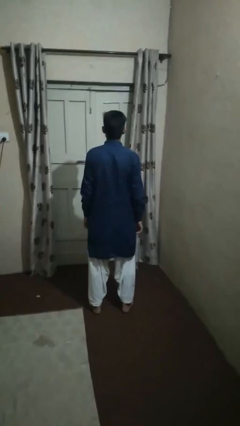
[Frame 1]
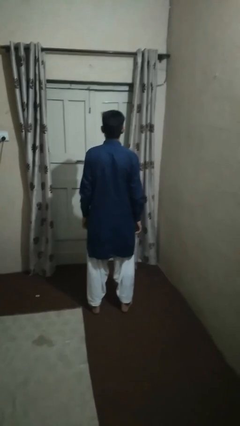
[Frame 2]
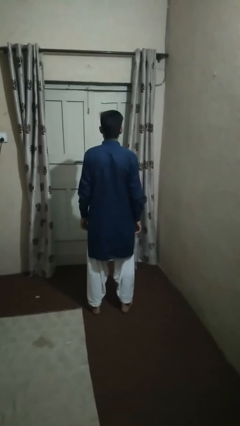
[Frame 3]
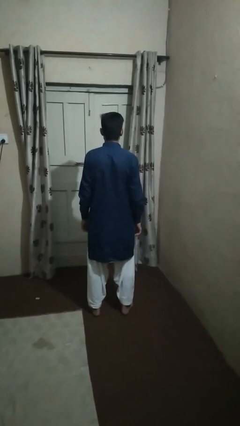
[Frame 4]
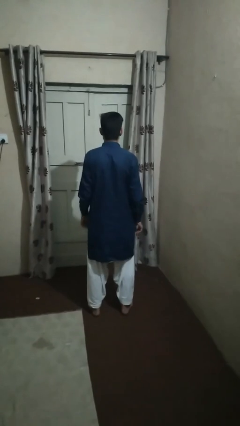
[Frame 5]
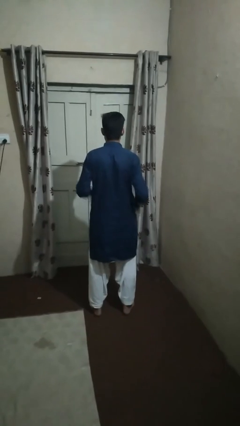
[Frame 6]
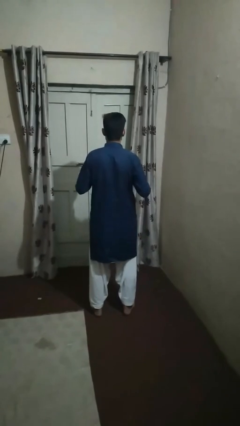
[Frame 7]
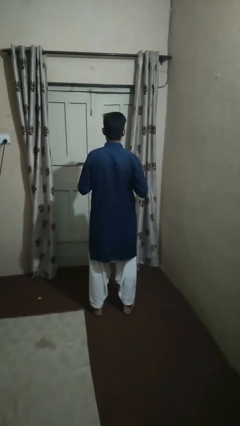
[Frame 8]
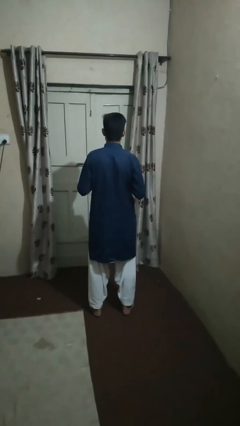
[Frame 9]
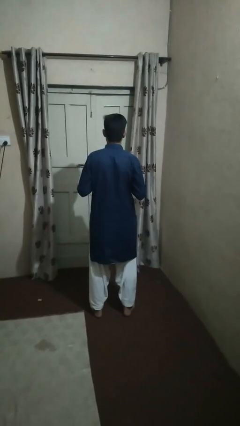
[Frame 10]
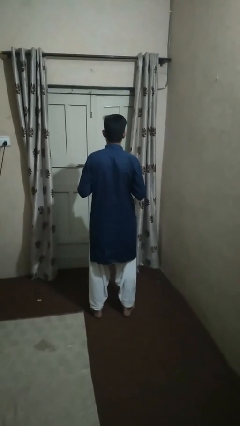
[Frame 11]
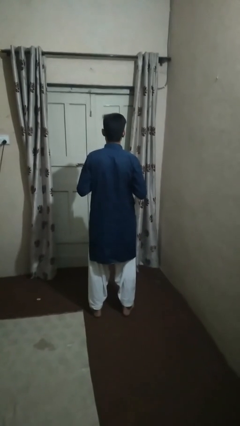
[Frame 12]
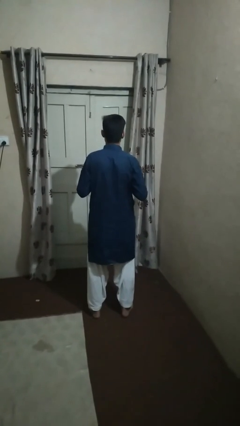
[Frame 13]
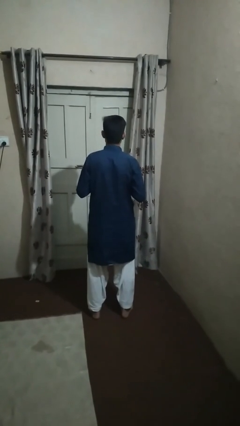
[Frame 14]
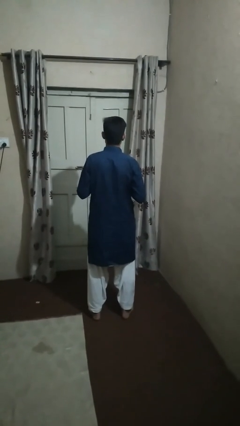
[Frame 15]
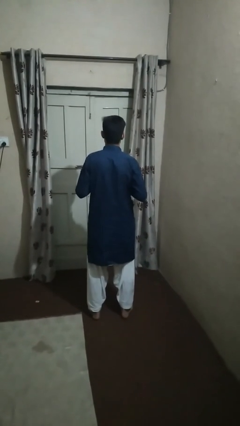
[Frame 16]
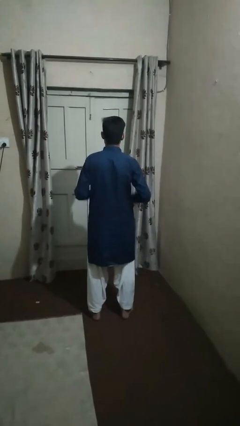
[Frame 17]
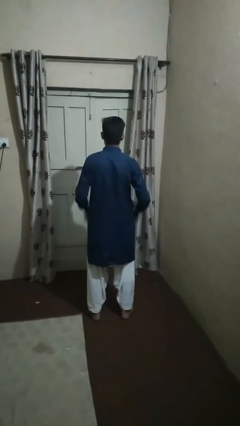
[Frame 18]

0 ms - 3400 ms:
person buttons shirt

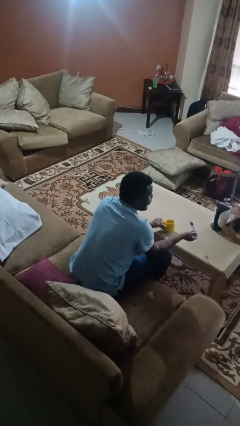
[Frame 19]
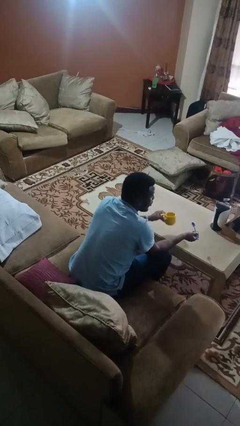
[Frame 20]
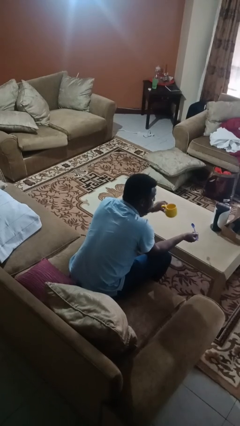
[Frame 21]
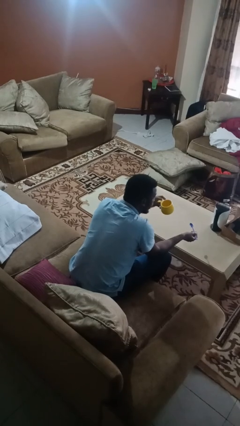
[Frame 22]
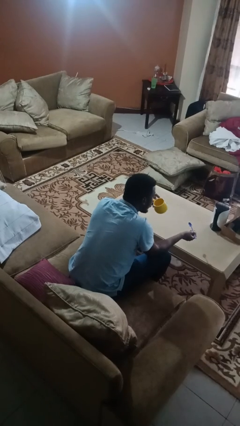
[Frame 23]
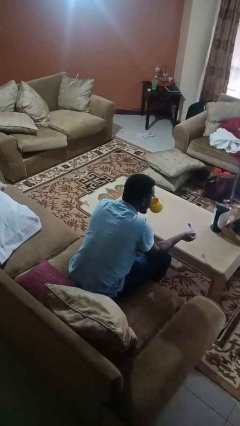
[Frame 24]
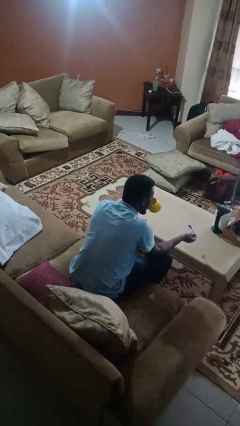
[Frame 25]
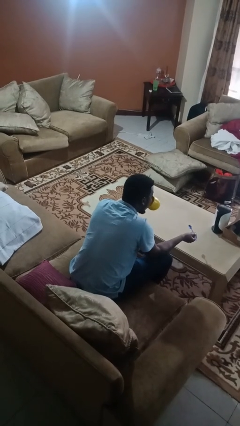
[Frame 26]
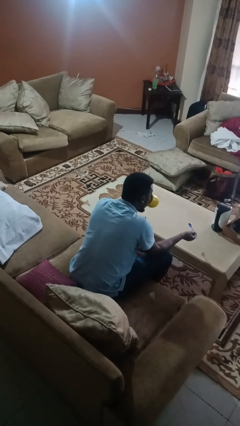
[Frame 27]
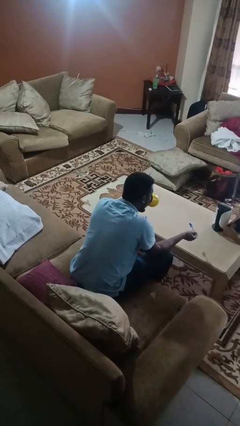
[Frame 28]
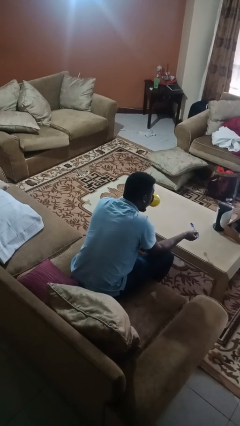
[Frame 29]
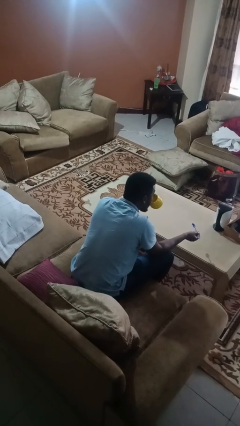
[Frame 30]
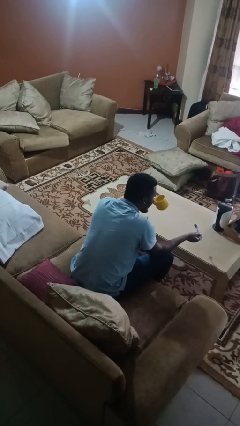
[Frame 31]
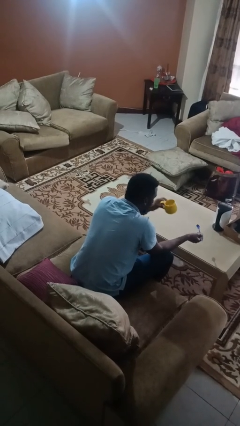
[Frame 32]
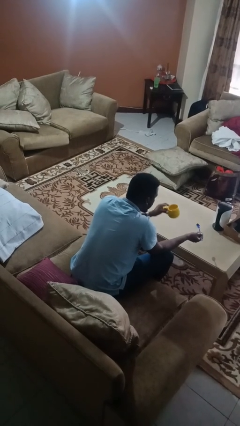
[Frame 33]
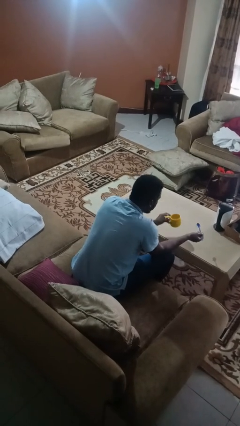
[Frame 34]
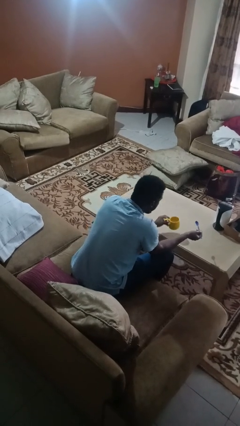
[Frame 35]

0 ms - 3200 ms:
person drinks from mug

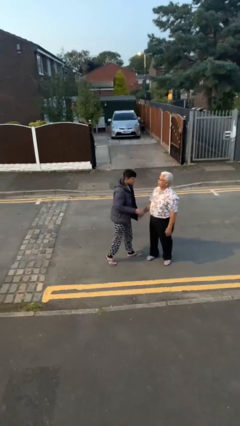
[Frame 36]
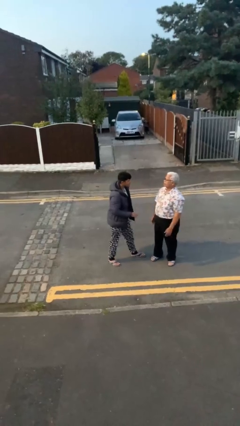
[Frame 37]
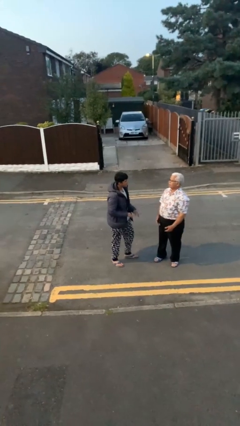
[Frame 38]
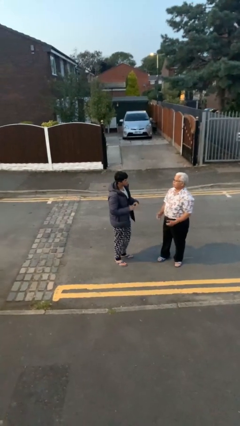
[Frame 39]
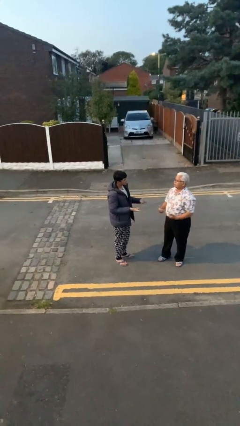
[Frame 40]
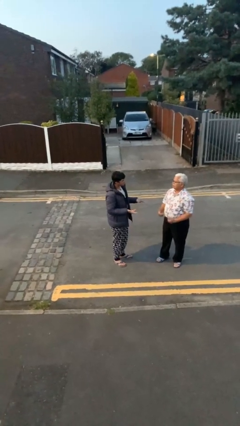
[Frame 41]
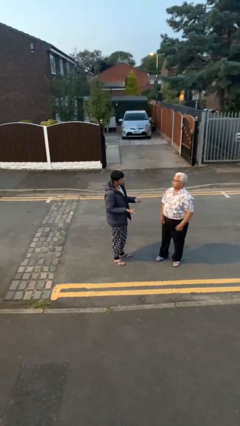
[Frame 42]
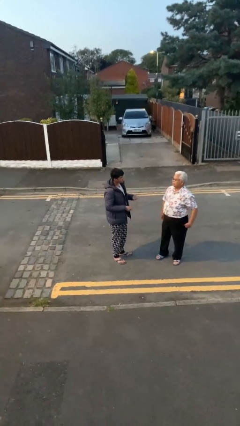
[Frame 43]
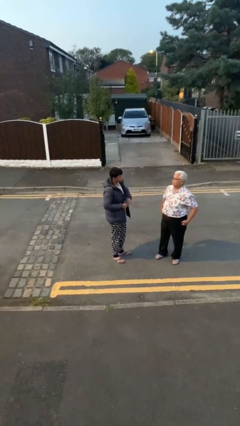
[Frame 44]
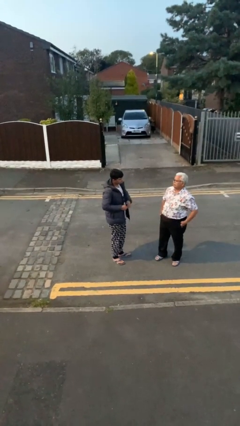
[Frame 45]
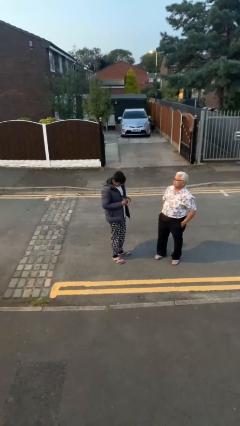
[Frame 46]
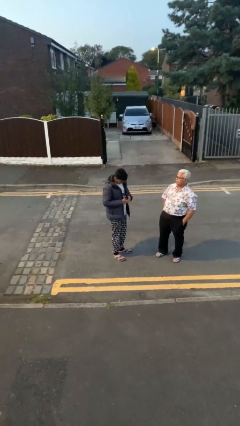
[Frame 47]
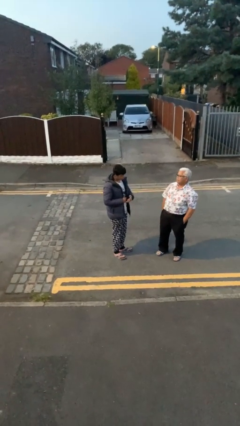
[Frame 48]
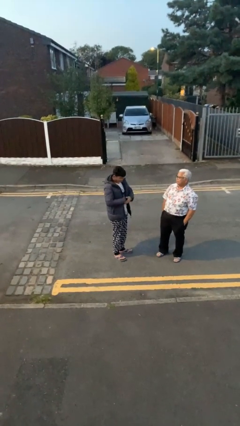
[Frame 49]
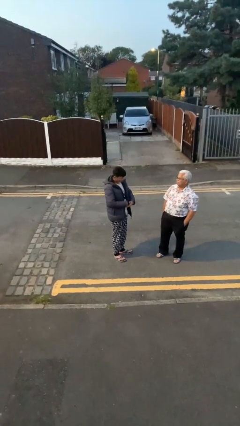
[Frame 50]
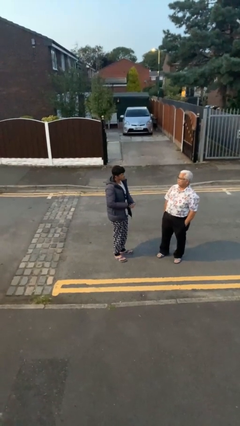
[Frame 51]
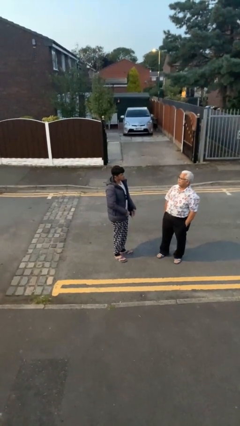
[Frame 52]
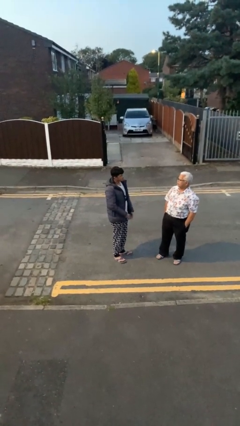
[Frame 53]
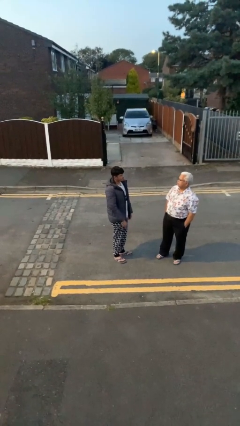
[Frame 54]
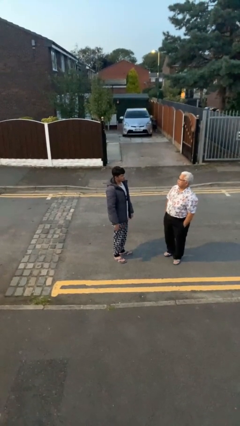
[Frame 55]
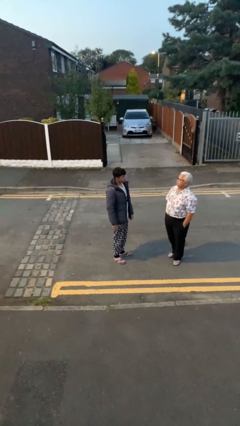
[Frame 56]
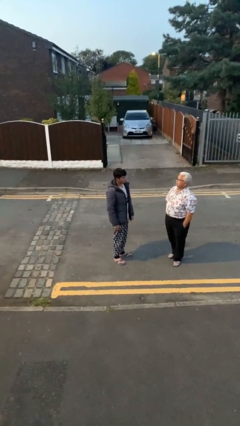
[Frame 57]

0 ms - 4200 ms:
person talks to person

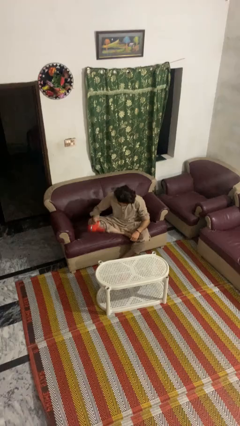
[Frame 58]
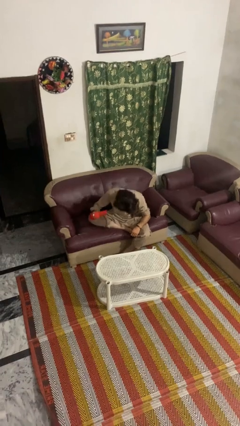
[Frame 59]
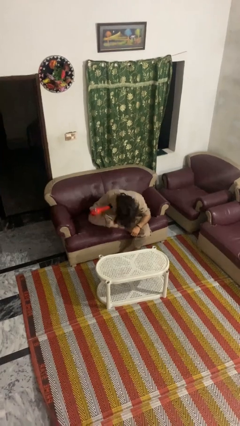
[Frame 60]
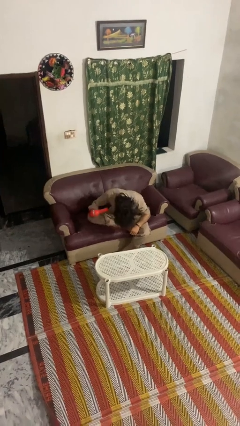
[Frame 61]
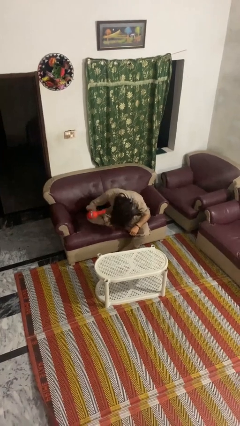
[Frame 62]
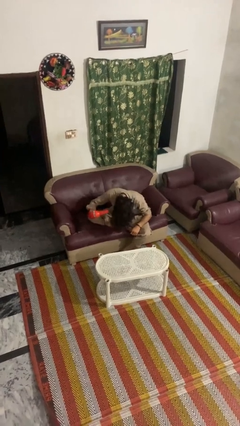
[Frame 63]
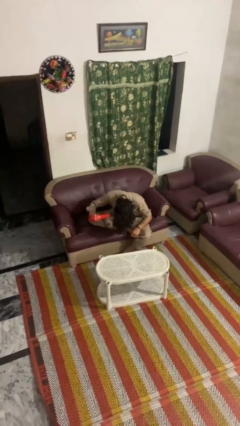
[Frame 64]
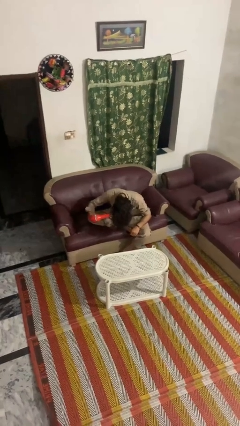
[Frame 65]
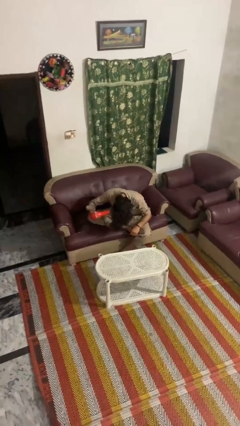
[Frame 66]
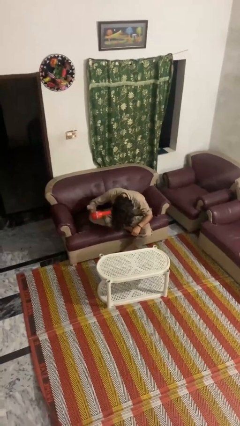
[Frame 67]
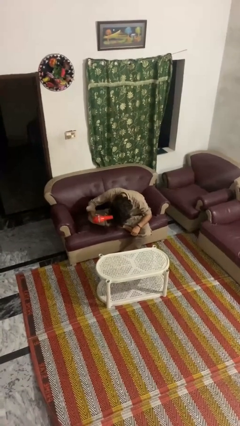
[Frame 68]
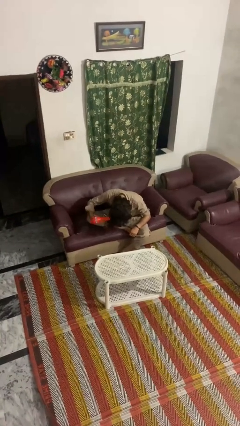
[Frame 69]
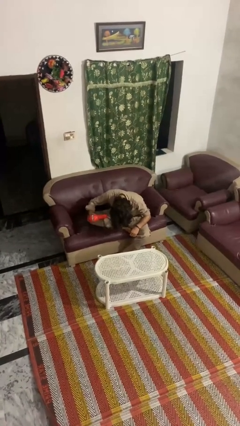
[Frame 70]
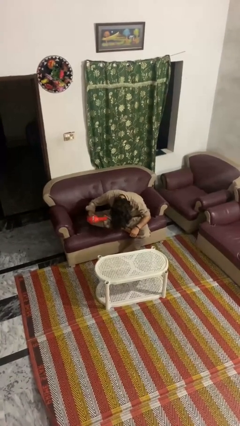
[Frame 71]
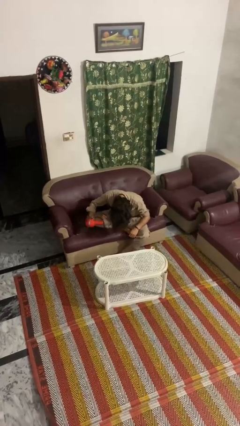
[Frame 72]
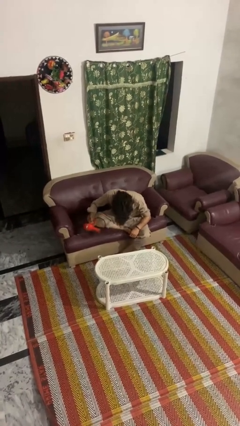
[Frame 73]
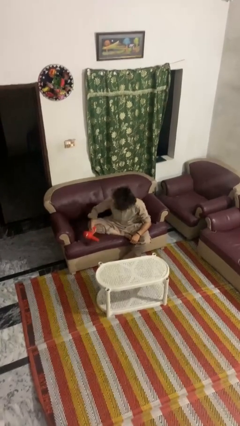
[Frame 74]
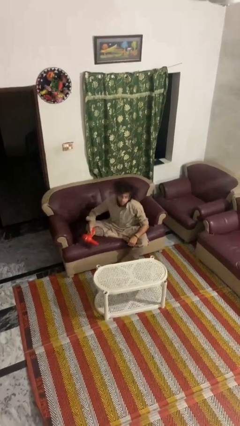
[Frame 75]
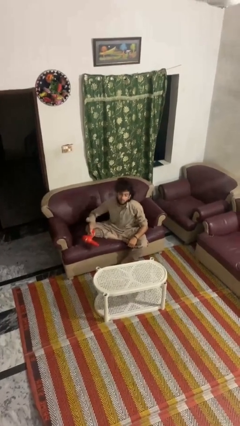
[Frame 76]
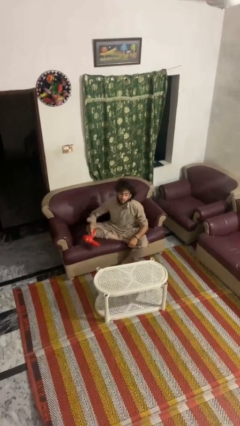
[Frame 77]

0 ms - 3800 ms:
person dries hair with hairdryer

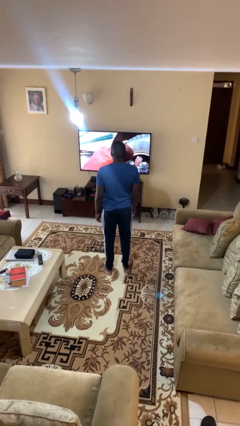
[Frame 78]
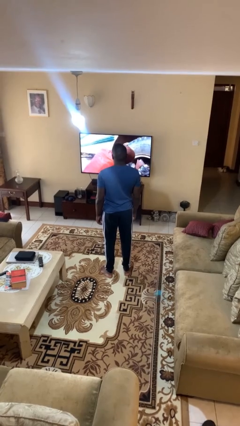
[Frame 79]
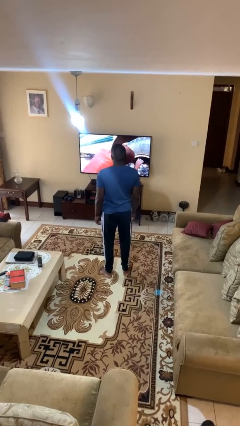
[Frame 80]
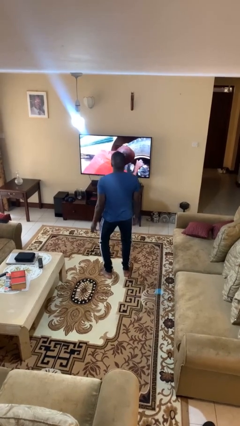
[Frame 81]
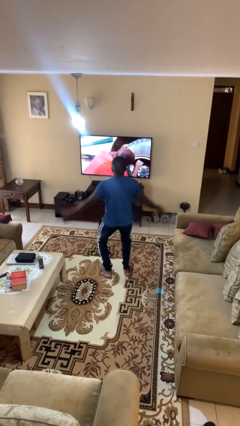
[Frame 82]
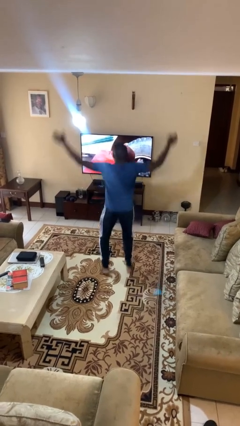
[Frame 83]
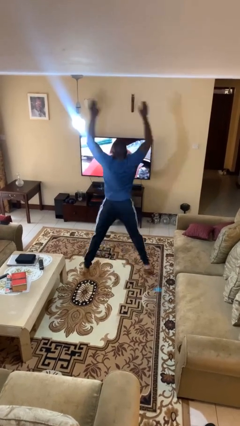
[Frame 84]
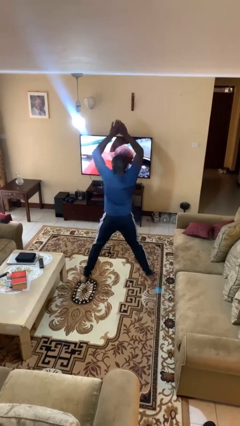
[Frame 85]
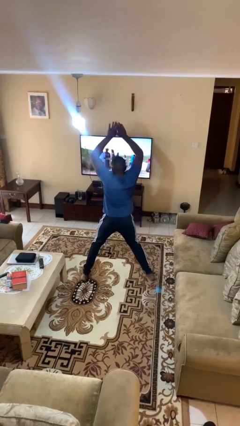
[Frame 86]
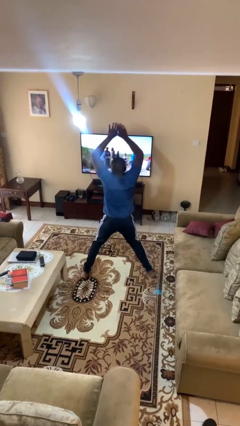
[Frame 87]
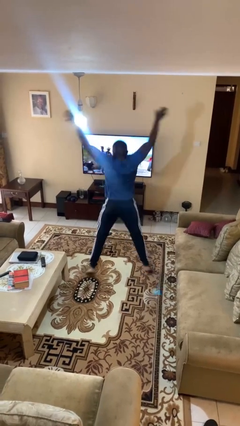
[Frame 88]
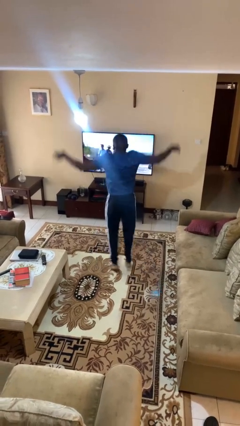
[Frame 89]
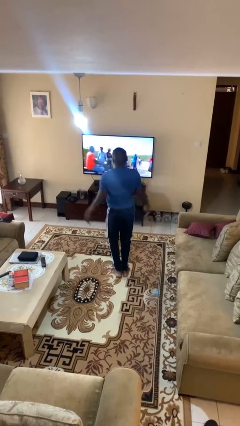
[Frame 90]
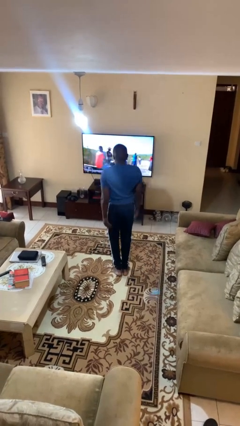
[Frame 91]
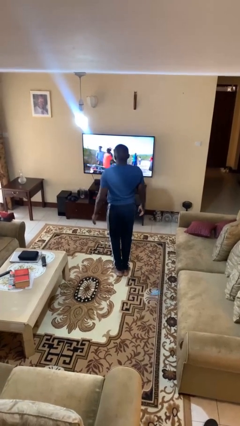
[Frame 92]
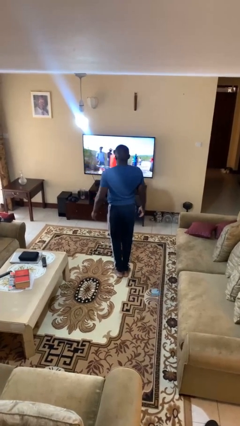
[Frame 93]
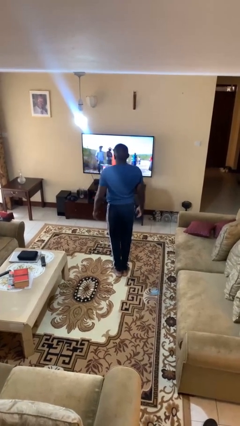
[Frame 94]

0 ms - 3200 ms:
person exercises with jumping jacks
